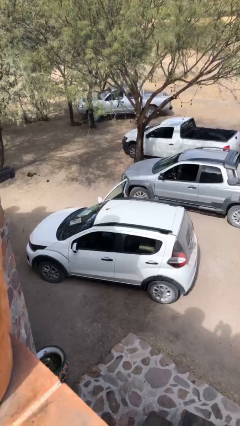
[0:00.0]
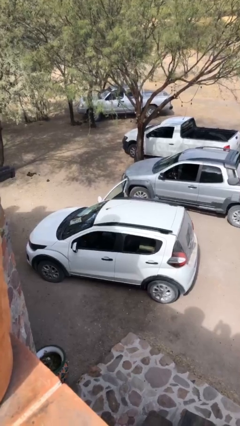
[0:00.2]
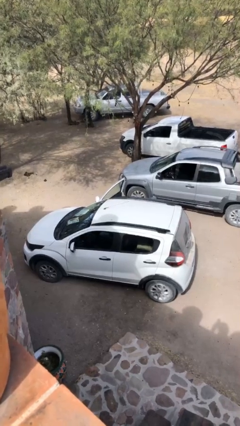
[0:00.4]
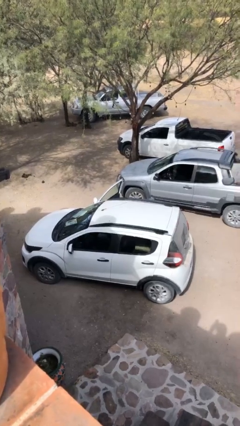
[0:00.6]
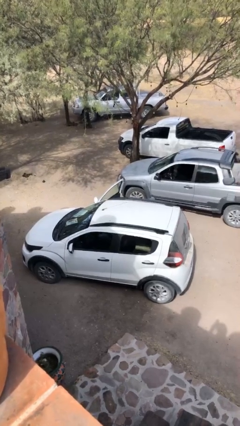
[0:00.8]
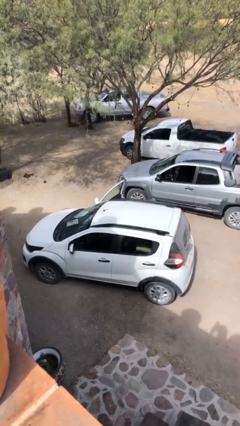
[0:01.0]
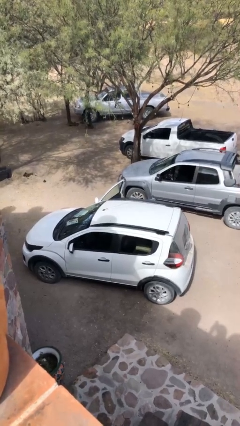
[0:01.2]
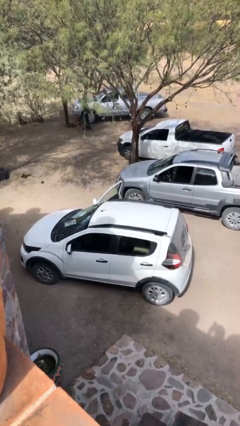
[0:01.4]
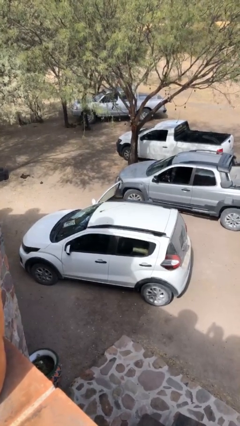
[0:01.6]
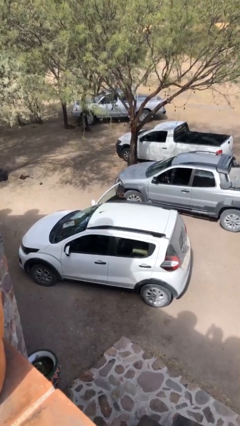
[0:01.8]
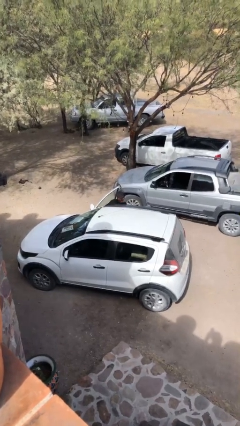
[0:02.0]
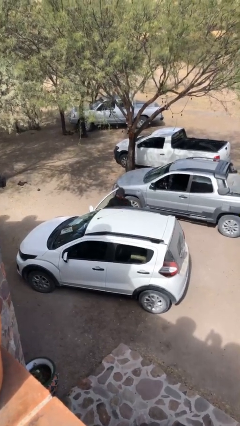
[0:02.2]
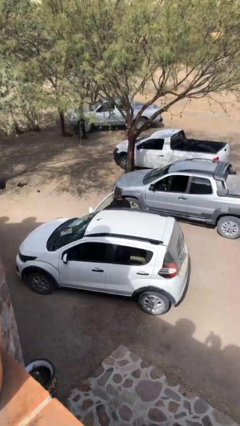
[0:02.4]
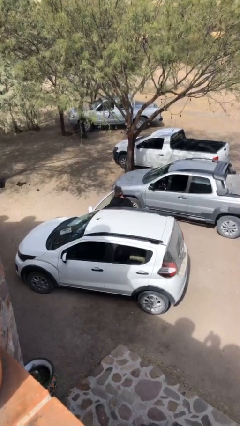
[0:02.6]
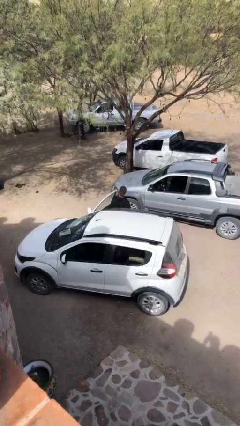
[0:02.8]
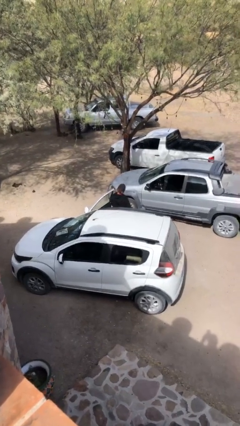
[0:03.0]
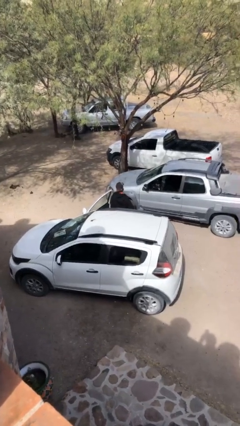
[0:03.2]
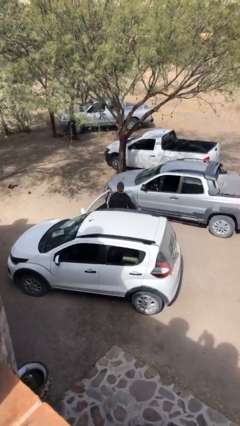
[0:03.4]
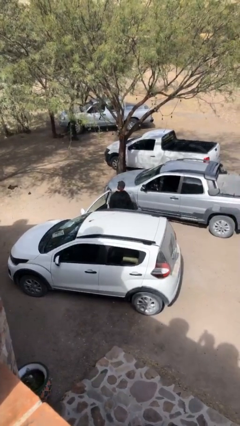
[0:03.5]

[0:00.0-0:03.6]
person exits car

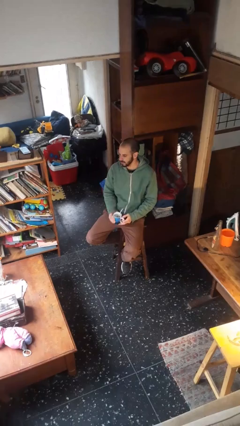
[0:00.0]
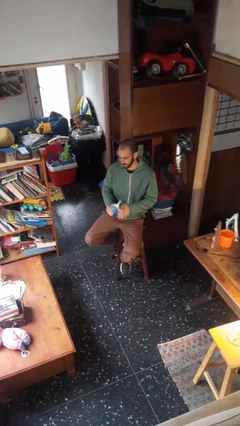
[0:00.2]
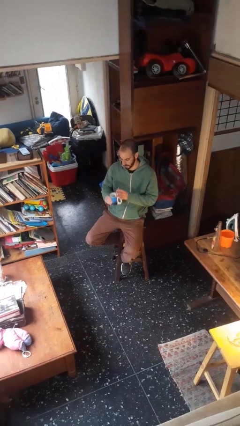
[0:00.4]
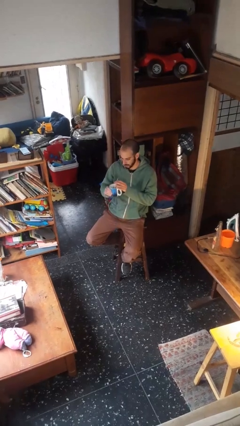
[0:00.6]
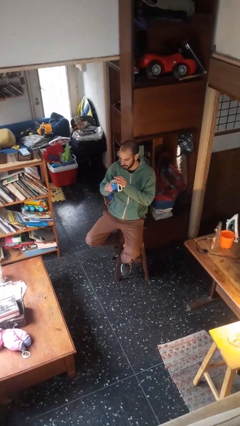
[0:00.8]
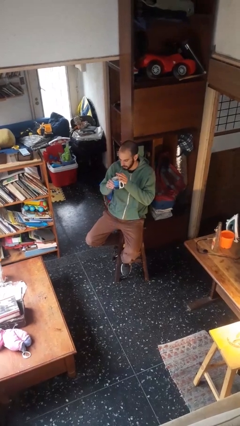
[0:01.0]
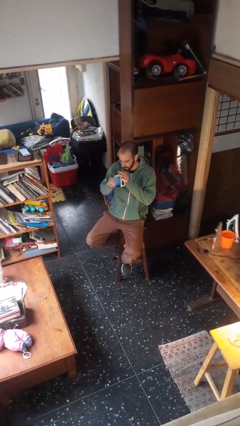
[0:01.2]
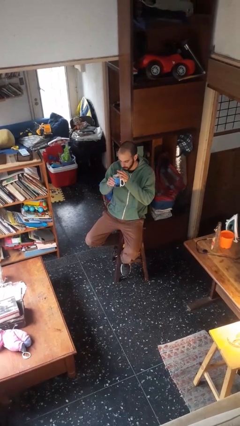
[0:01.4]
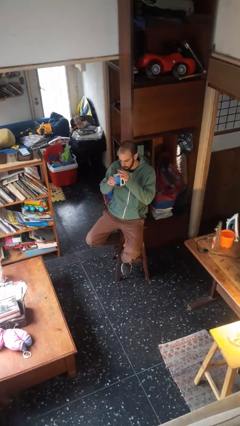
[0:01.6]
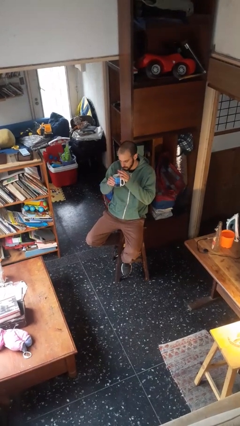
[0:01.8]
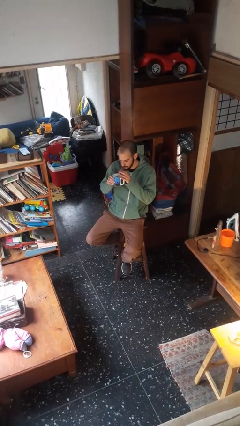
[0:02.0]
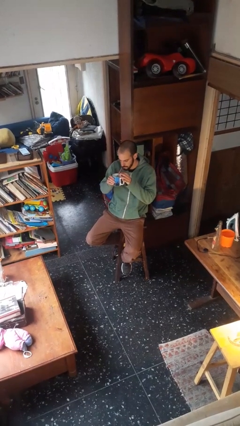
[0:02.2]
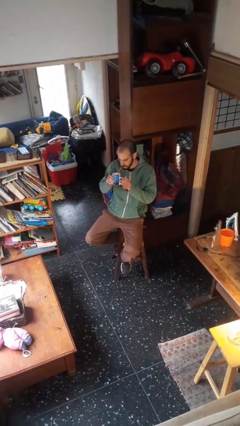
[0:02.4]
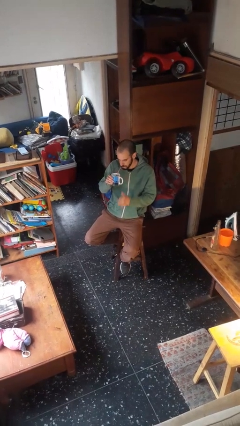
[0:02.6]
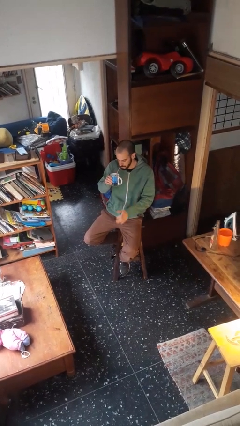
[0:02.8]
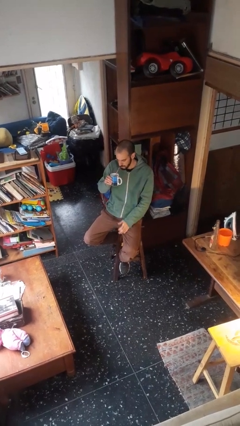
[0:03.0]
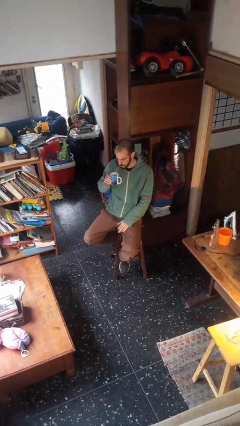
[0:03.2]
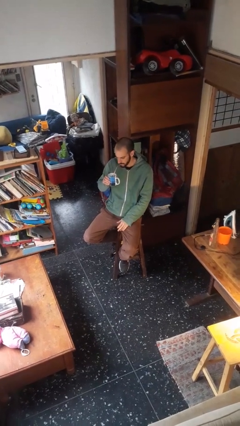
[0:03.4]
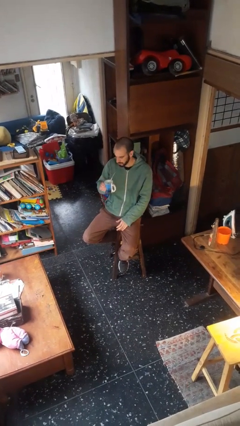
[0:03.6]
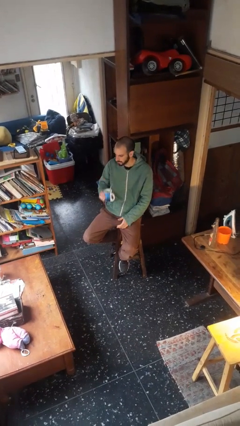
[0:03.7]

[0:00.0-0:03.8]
person drinks from straw

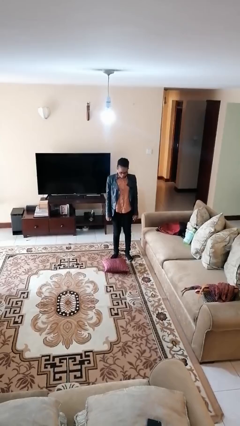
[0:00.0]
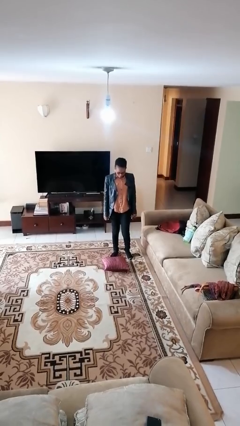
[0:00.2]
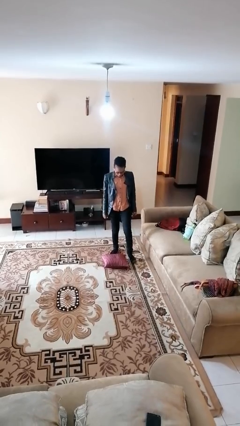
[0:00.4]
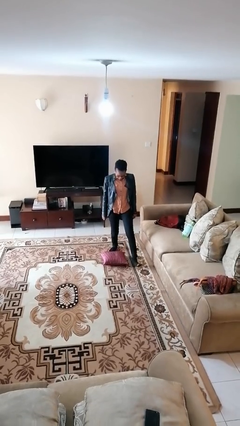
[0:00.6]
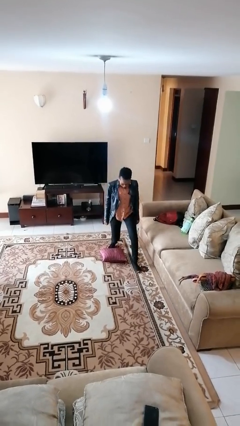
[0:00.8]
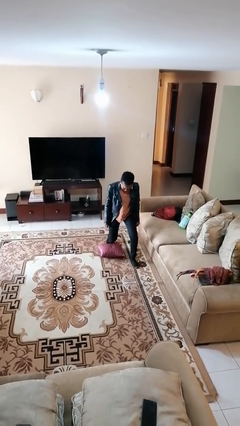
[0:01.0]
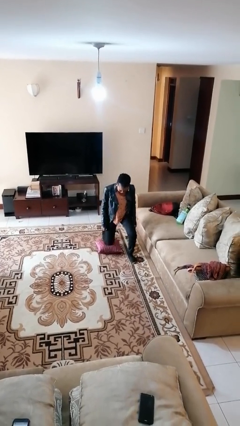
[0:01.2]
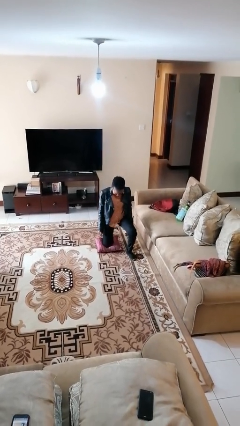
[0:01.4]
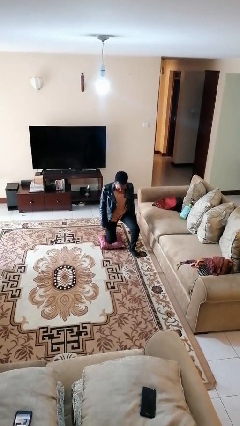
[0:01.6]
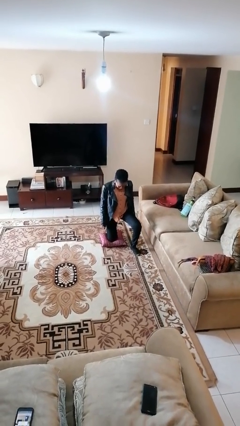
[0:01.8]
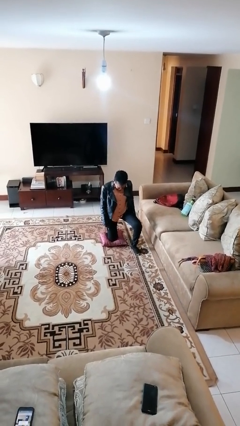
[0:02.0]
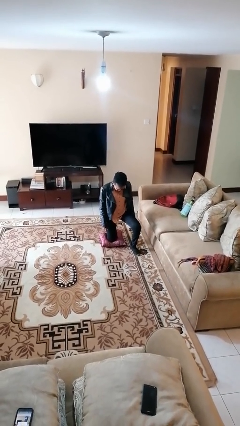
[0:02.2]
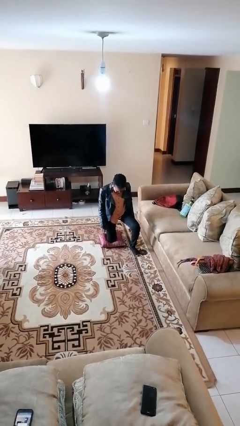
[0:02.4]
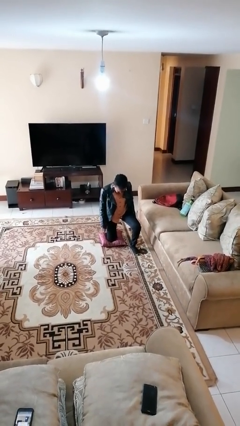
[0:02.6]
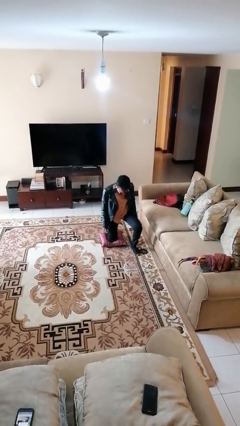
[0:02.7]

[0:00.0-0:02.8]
person kneels

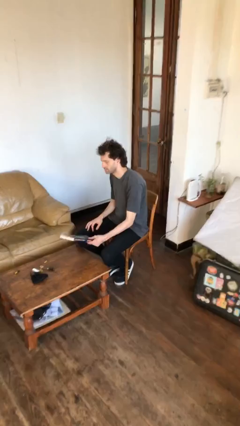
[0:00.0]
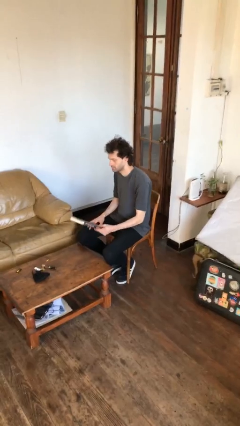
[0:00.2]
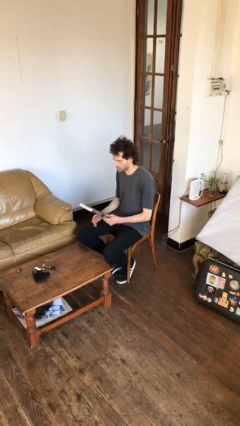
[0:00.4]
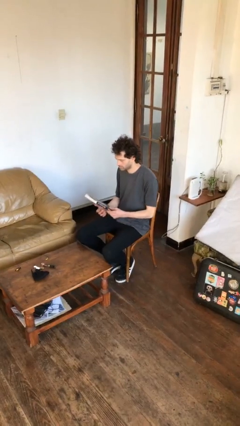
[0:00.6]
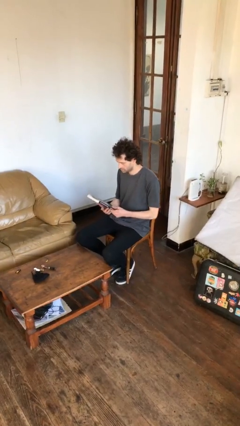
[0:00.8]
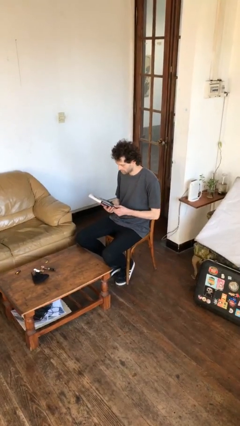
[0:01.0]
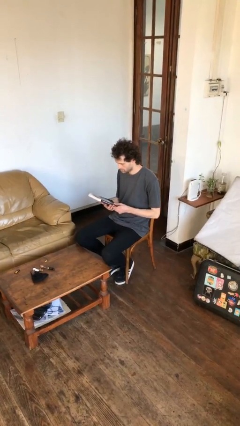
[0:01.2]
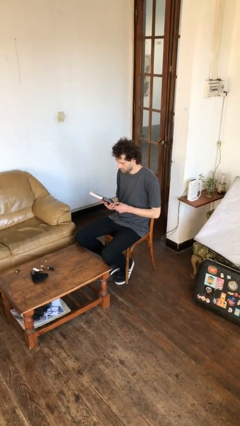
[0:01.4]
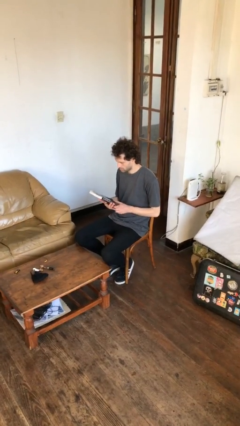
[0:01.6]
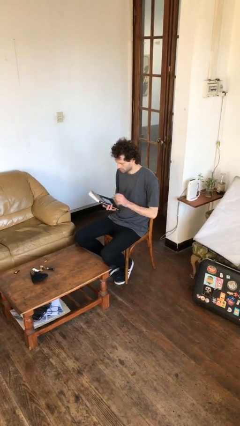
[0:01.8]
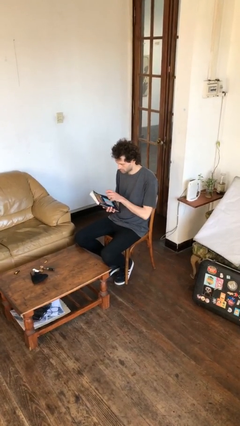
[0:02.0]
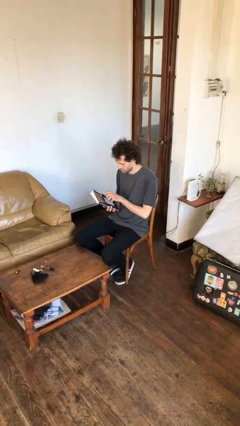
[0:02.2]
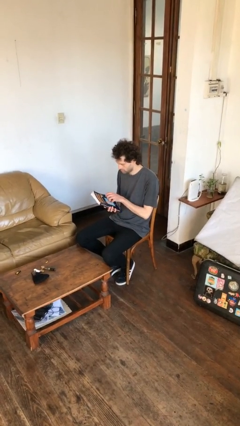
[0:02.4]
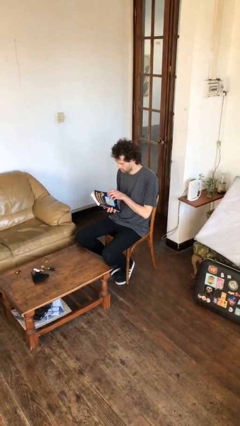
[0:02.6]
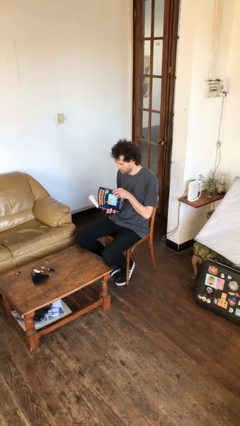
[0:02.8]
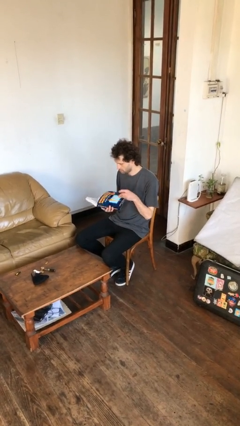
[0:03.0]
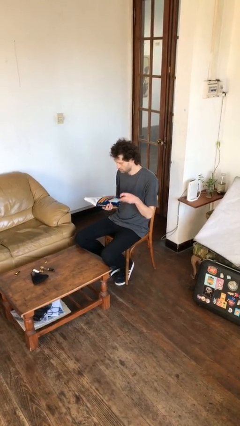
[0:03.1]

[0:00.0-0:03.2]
person picks up object from table

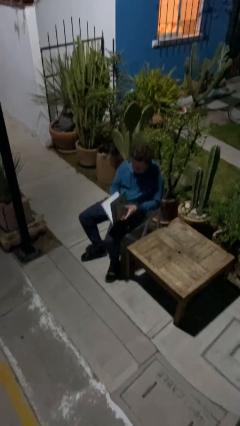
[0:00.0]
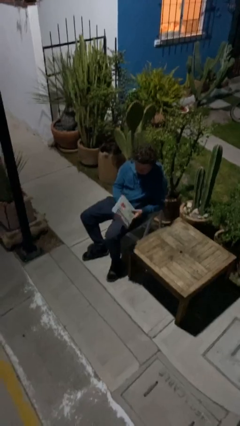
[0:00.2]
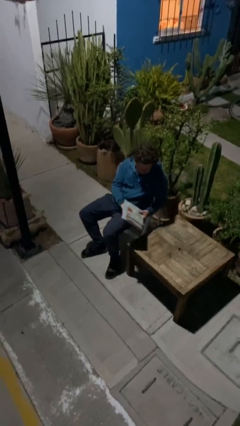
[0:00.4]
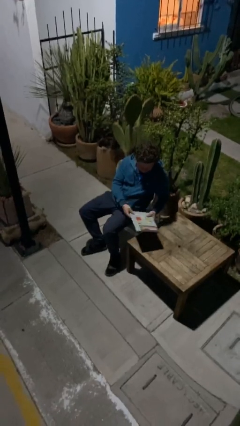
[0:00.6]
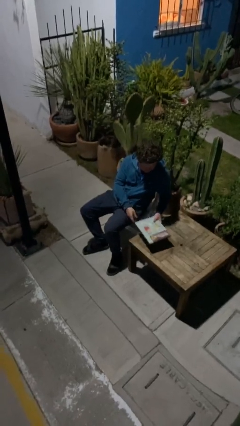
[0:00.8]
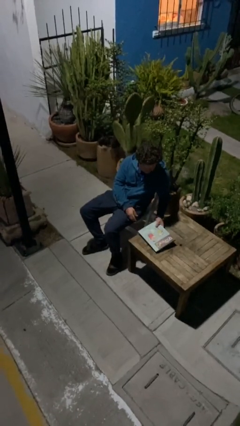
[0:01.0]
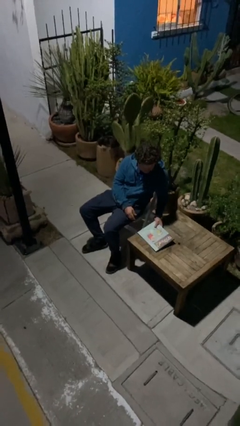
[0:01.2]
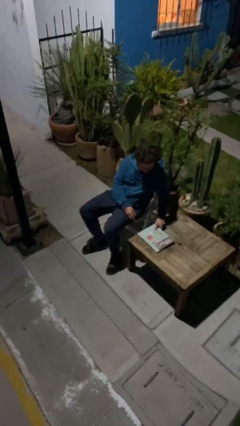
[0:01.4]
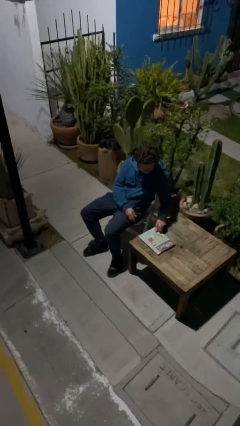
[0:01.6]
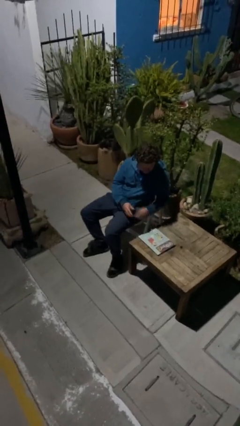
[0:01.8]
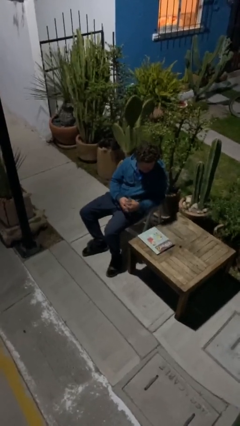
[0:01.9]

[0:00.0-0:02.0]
person puts down object on table

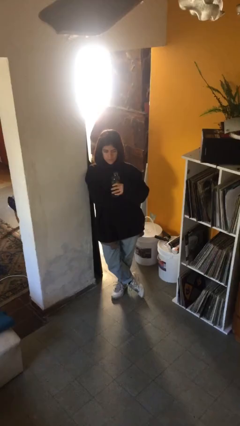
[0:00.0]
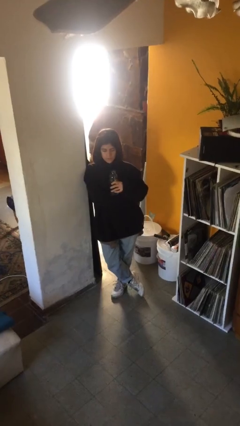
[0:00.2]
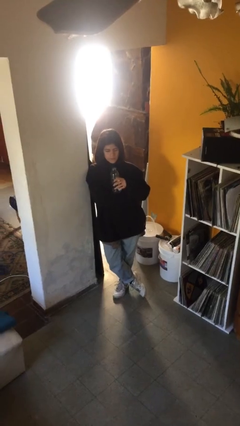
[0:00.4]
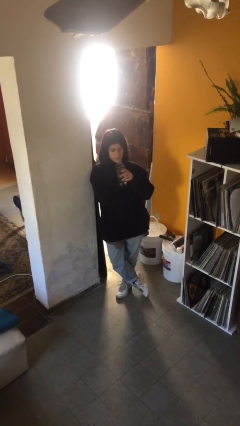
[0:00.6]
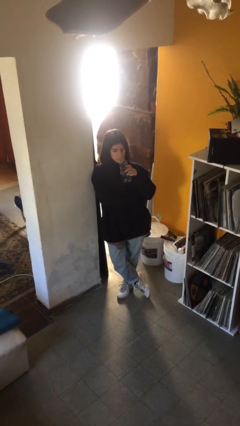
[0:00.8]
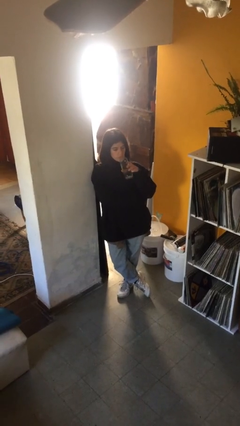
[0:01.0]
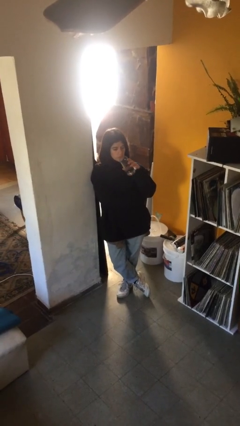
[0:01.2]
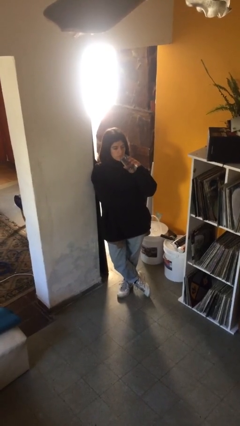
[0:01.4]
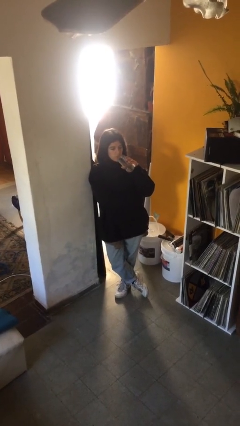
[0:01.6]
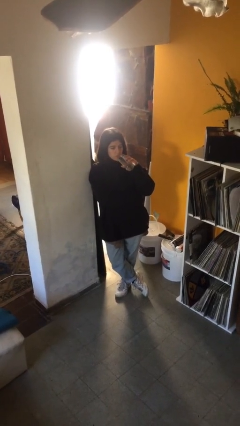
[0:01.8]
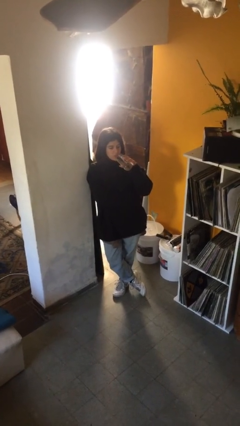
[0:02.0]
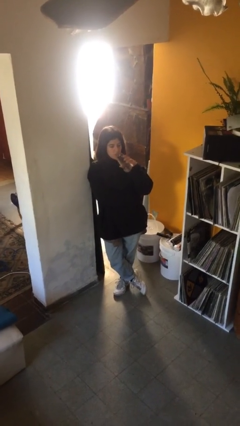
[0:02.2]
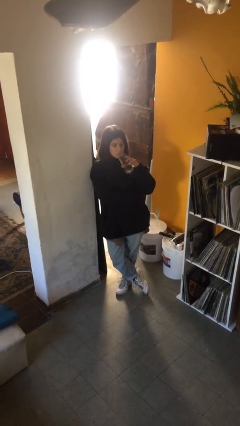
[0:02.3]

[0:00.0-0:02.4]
person drinks from bottle
